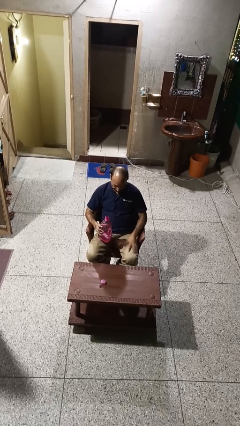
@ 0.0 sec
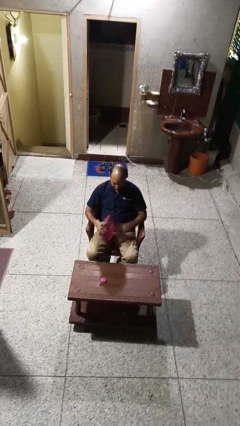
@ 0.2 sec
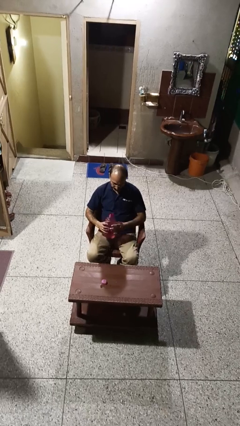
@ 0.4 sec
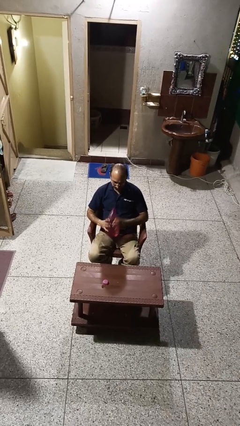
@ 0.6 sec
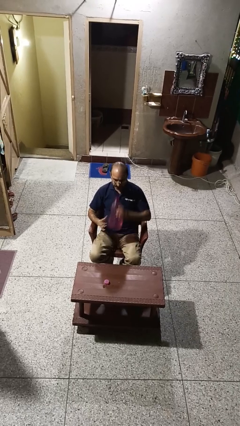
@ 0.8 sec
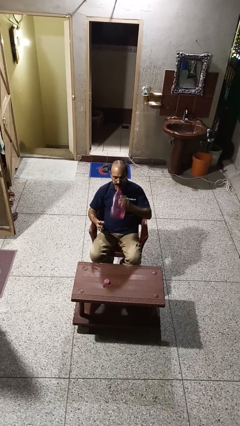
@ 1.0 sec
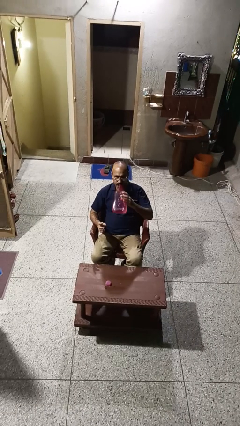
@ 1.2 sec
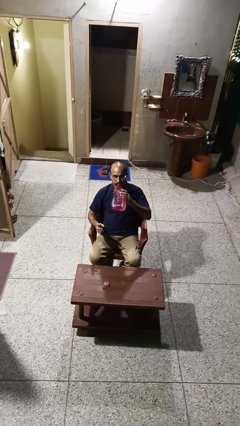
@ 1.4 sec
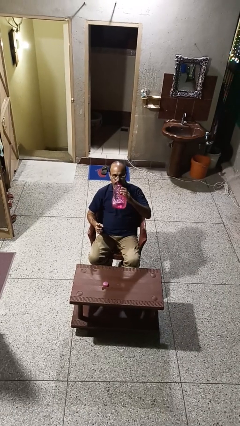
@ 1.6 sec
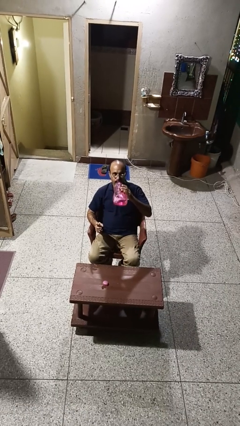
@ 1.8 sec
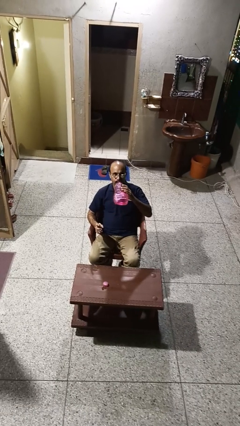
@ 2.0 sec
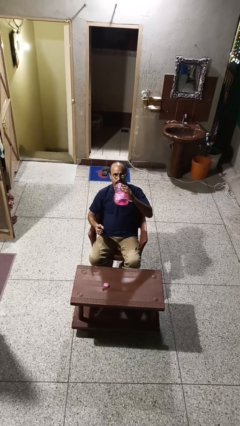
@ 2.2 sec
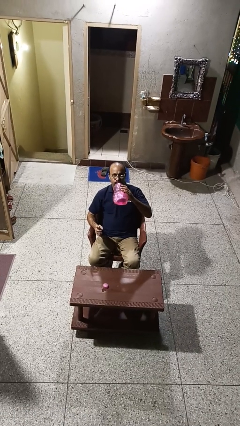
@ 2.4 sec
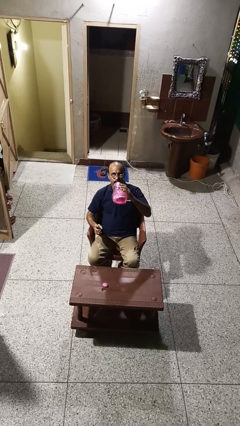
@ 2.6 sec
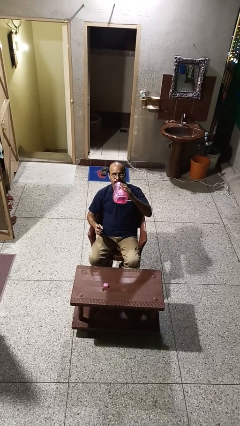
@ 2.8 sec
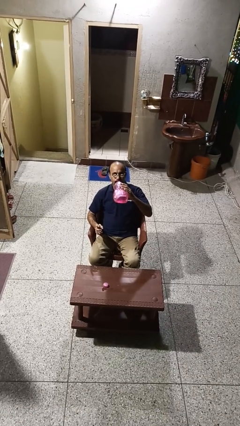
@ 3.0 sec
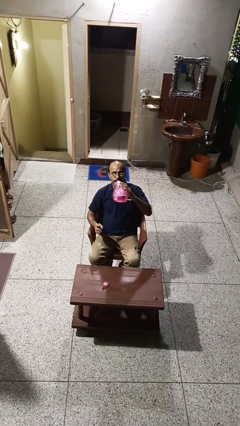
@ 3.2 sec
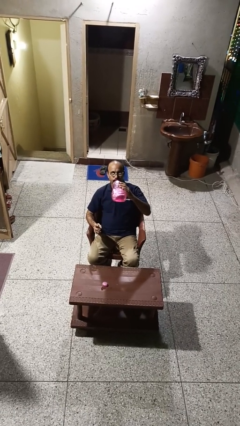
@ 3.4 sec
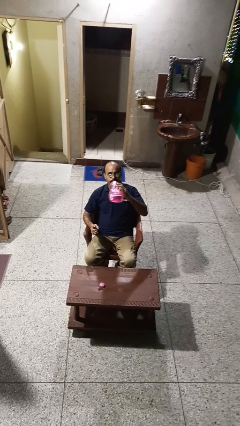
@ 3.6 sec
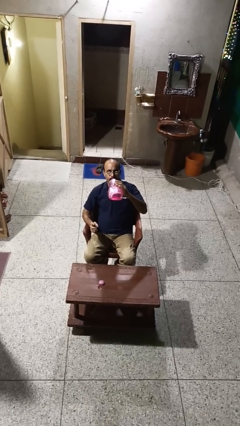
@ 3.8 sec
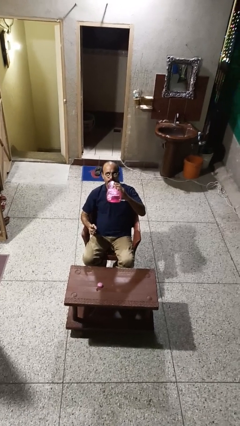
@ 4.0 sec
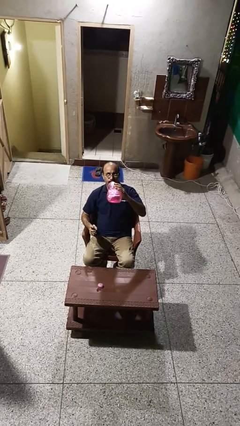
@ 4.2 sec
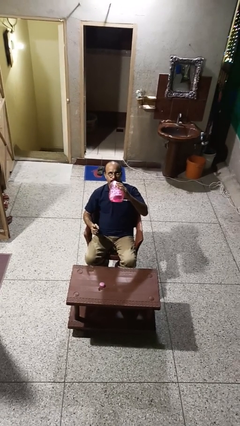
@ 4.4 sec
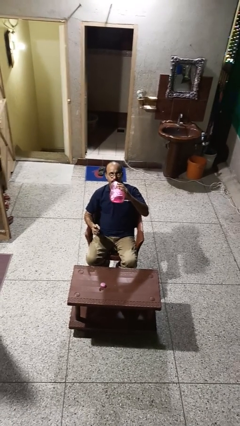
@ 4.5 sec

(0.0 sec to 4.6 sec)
person drinks from bottle

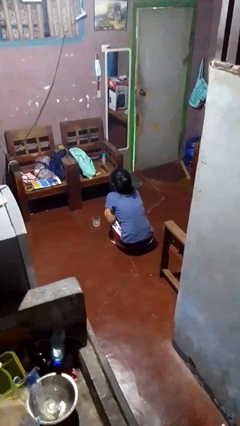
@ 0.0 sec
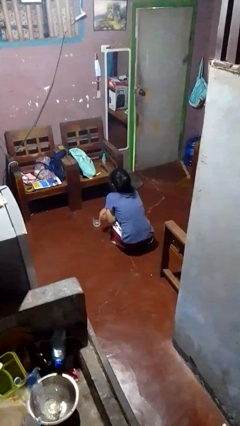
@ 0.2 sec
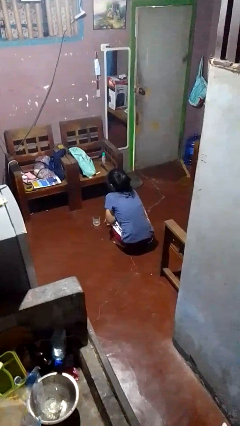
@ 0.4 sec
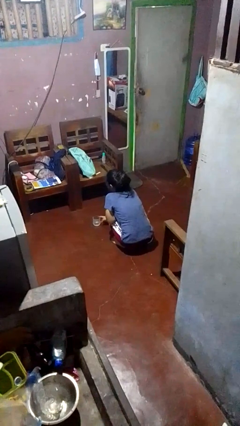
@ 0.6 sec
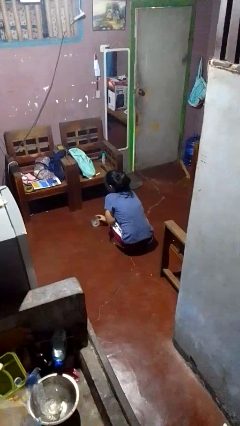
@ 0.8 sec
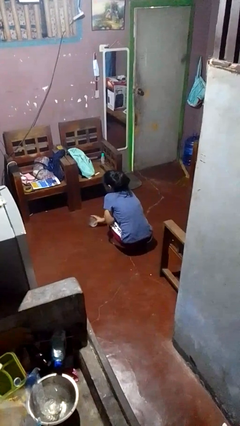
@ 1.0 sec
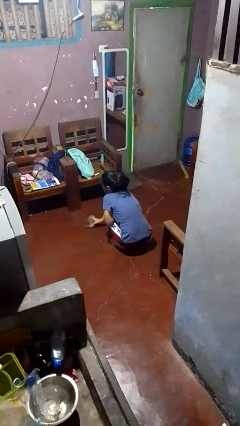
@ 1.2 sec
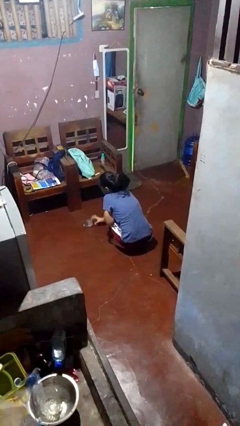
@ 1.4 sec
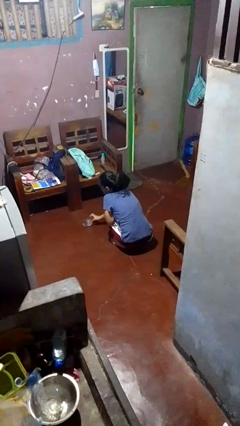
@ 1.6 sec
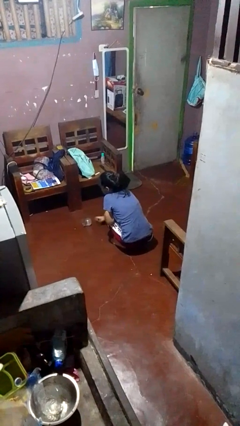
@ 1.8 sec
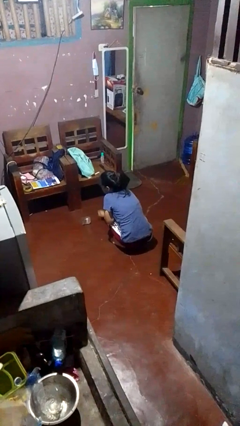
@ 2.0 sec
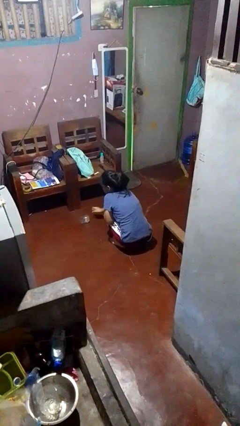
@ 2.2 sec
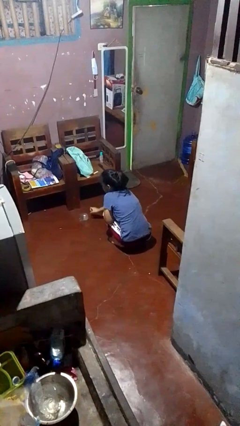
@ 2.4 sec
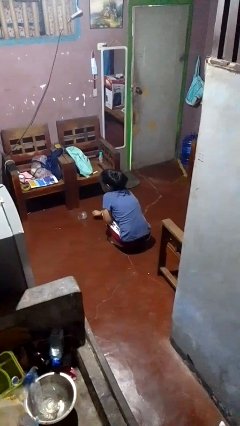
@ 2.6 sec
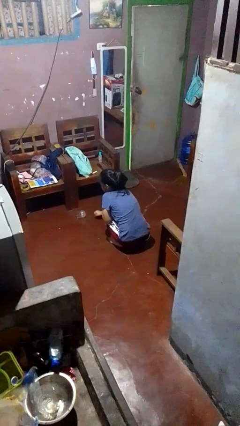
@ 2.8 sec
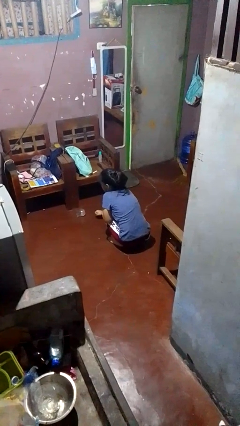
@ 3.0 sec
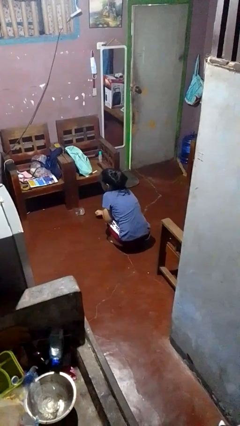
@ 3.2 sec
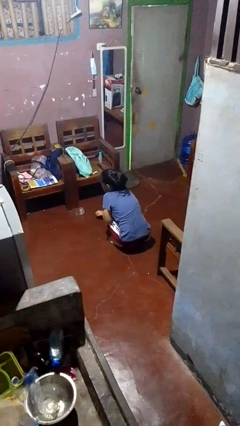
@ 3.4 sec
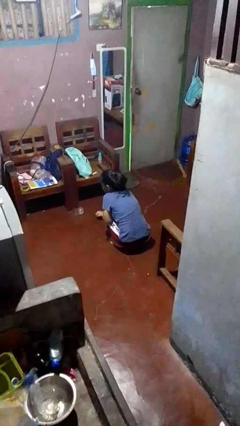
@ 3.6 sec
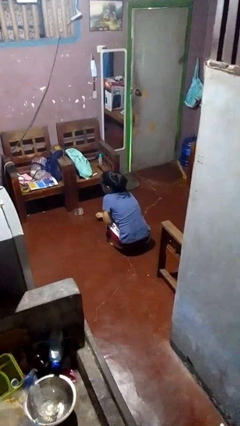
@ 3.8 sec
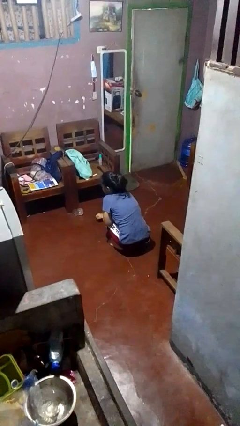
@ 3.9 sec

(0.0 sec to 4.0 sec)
person spills on floor

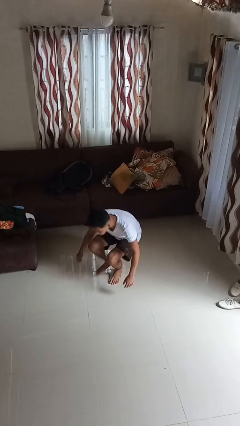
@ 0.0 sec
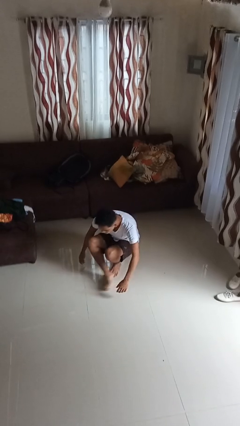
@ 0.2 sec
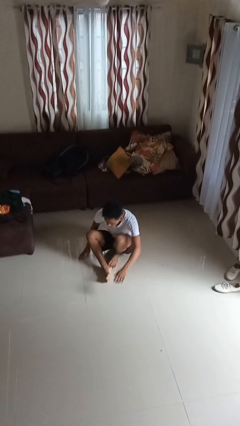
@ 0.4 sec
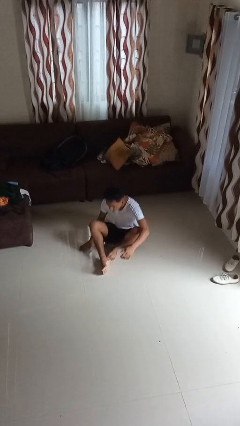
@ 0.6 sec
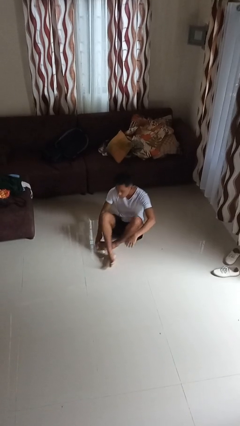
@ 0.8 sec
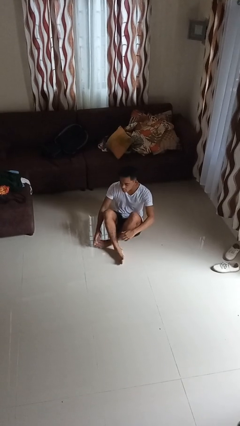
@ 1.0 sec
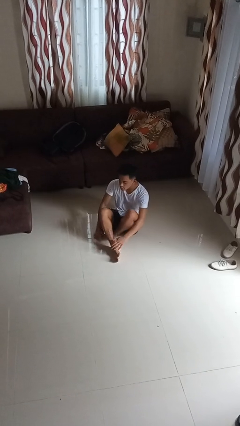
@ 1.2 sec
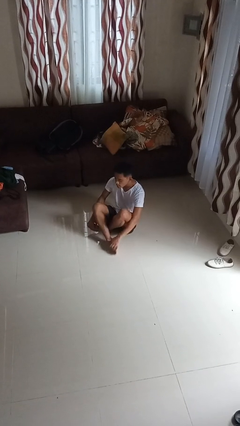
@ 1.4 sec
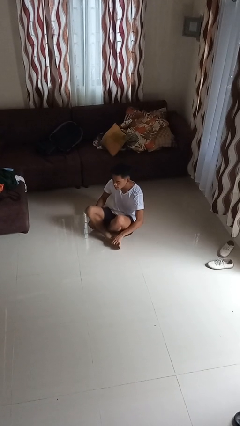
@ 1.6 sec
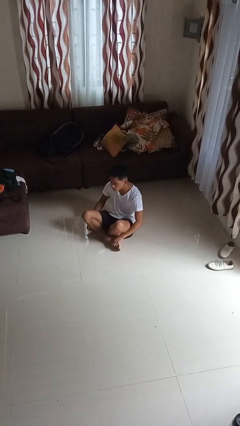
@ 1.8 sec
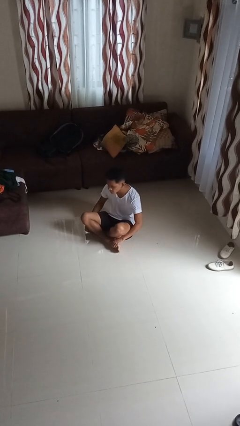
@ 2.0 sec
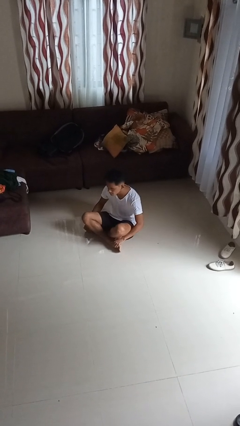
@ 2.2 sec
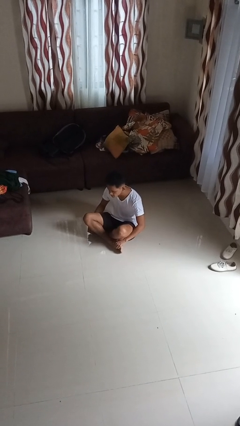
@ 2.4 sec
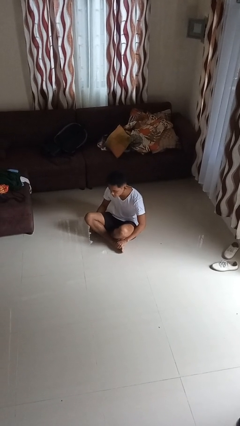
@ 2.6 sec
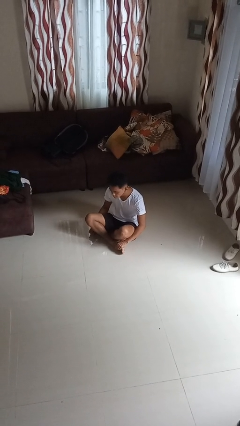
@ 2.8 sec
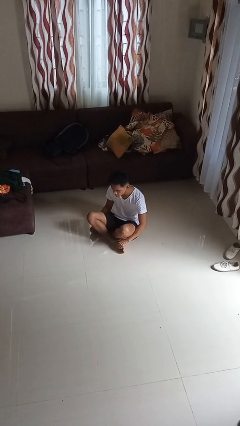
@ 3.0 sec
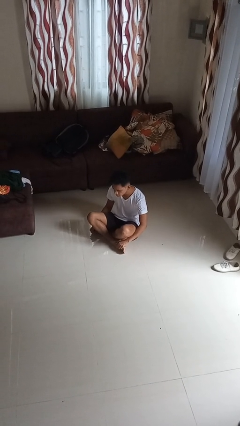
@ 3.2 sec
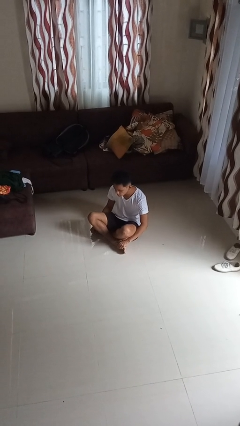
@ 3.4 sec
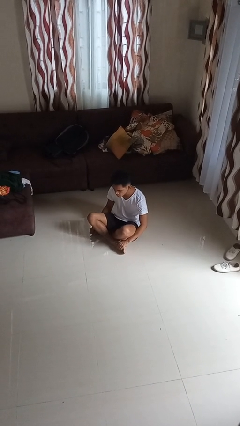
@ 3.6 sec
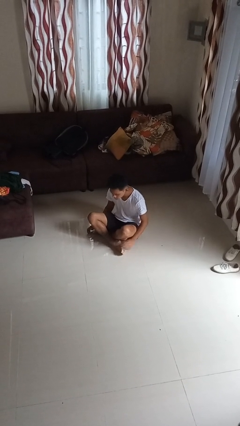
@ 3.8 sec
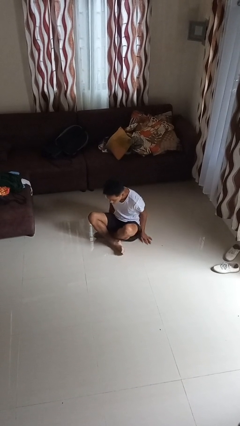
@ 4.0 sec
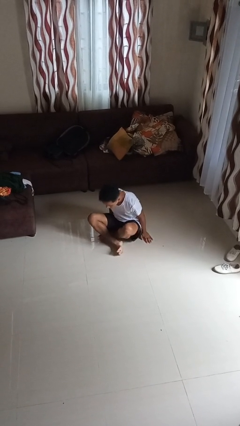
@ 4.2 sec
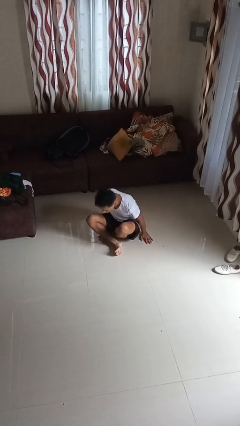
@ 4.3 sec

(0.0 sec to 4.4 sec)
person sits crisscross

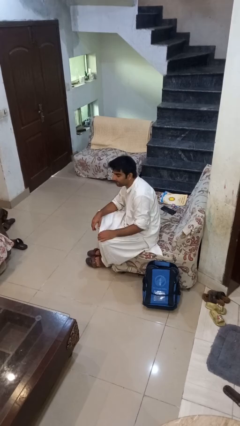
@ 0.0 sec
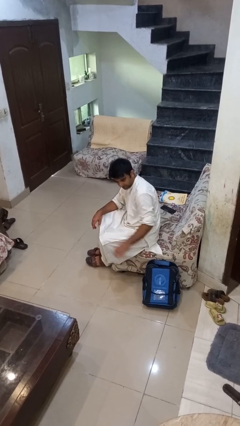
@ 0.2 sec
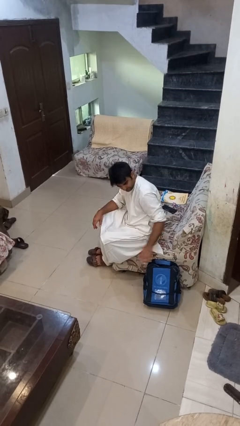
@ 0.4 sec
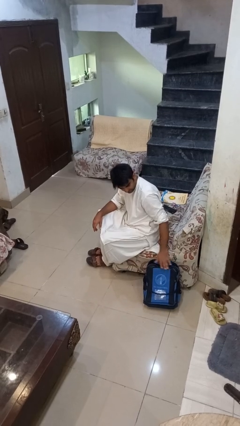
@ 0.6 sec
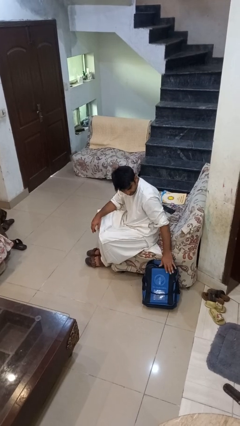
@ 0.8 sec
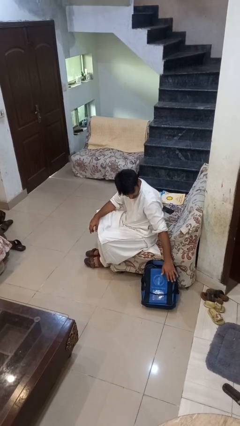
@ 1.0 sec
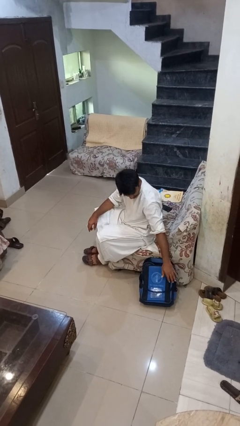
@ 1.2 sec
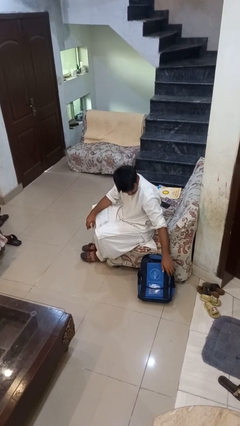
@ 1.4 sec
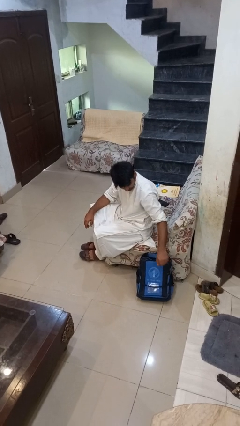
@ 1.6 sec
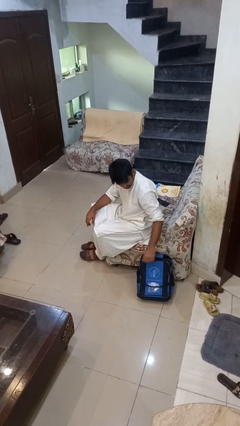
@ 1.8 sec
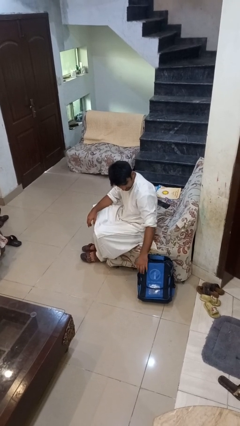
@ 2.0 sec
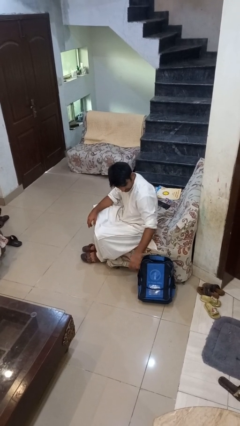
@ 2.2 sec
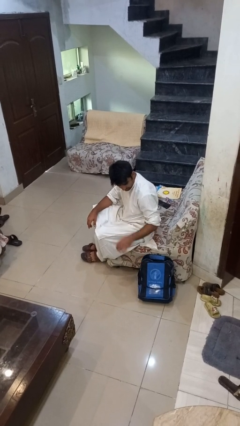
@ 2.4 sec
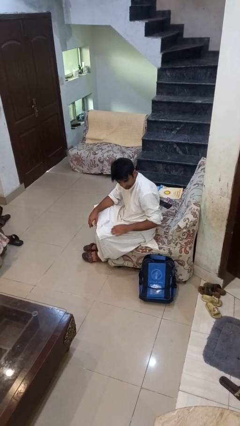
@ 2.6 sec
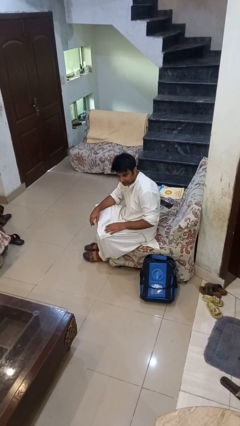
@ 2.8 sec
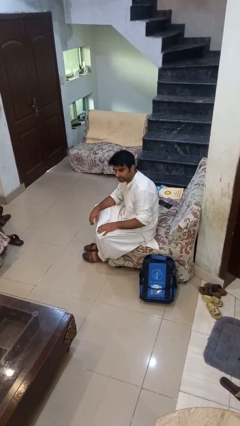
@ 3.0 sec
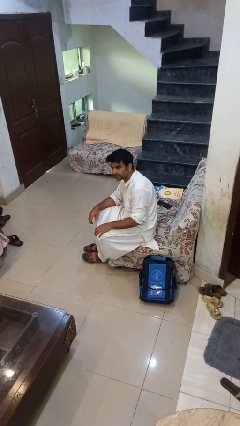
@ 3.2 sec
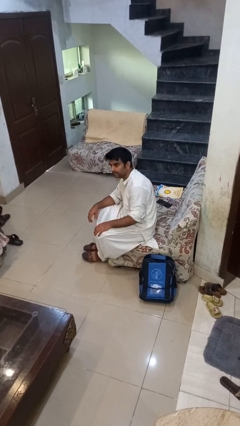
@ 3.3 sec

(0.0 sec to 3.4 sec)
person waves hand over object

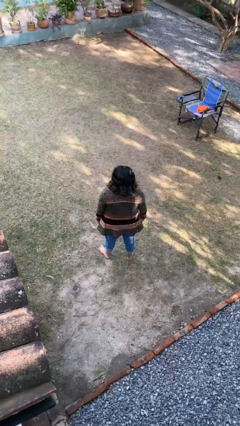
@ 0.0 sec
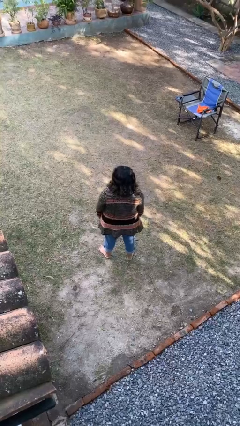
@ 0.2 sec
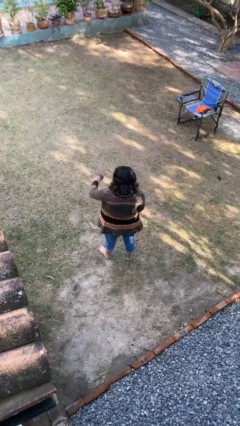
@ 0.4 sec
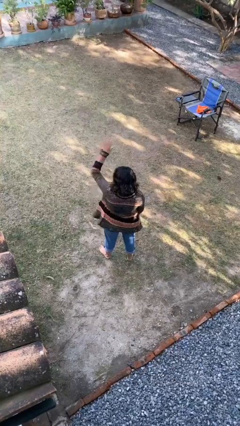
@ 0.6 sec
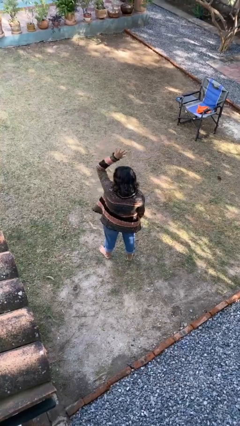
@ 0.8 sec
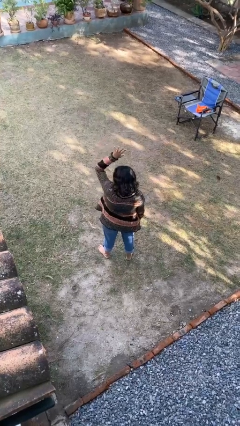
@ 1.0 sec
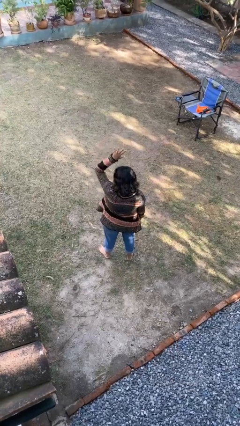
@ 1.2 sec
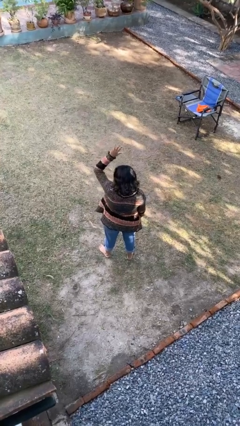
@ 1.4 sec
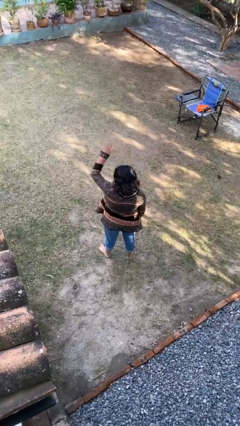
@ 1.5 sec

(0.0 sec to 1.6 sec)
person gestures number five
